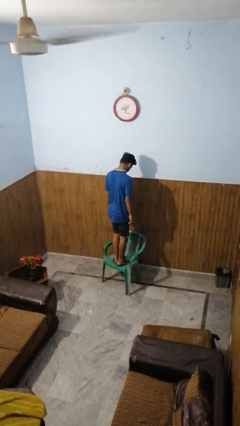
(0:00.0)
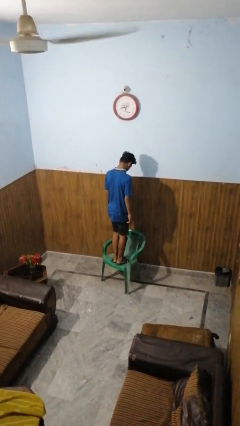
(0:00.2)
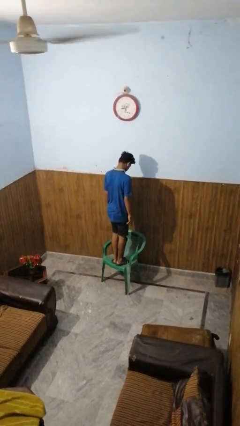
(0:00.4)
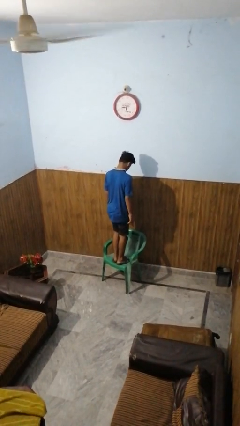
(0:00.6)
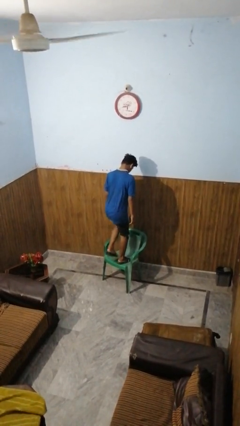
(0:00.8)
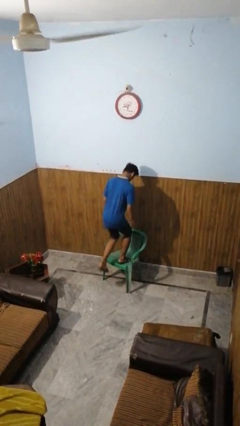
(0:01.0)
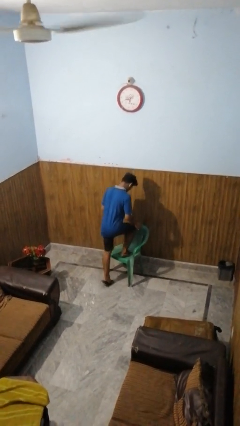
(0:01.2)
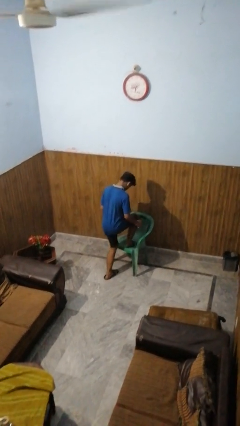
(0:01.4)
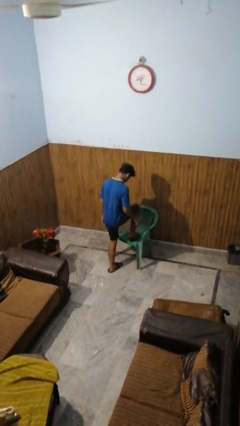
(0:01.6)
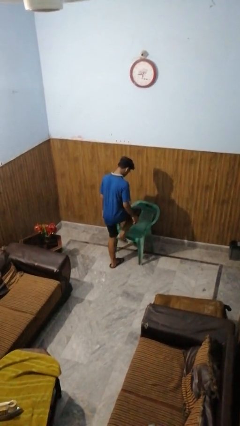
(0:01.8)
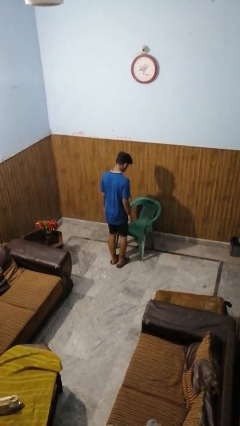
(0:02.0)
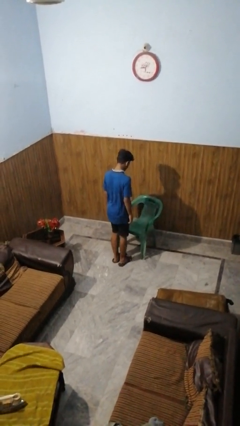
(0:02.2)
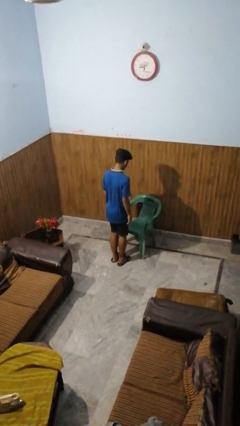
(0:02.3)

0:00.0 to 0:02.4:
person climbs off chair

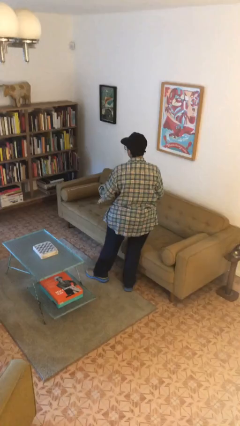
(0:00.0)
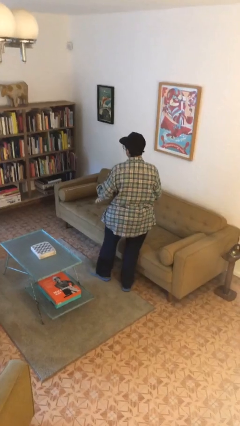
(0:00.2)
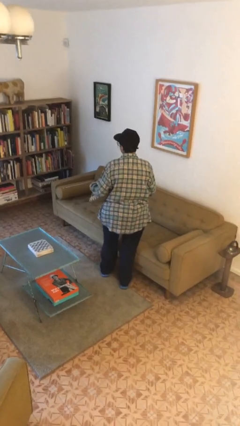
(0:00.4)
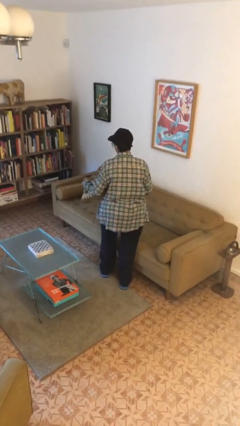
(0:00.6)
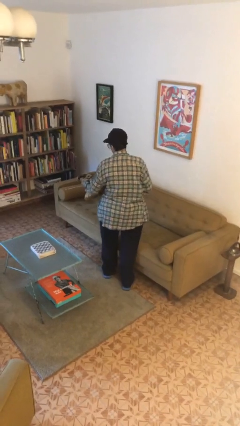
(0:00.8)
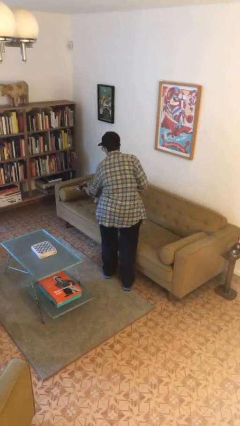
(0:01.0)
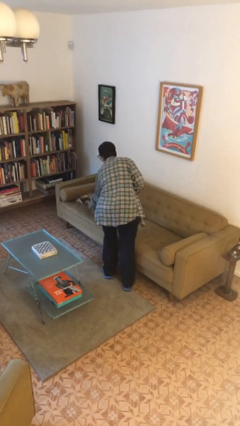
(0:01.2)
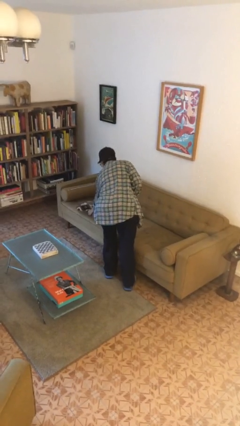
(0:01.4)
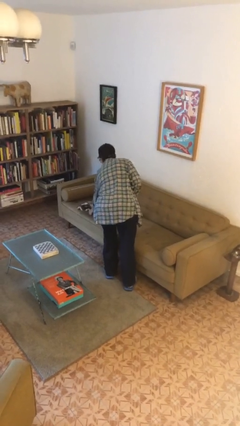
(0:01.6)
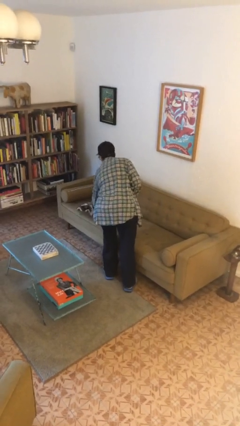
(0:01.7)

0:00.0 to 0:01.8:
person puts down object on couch

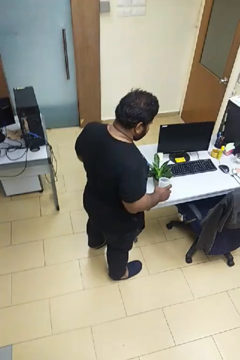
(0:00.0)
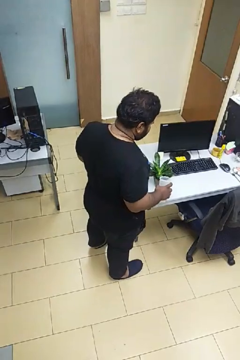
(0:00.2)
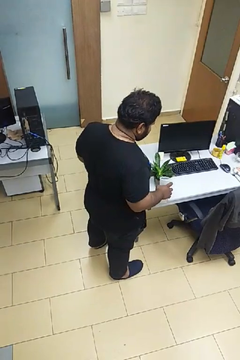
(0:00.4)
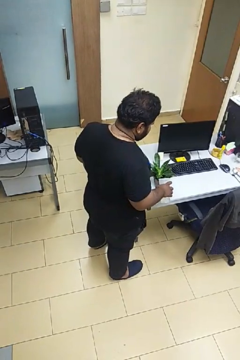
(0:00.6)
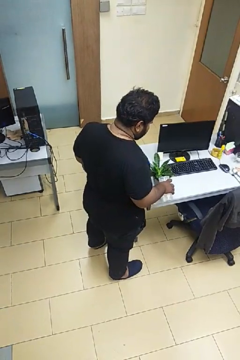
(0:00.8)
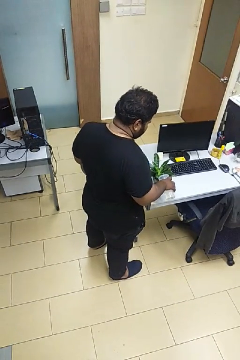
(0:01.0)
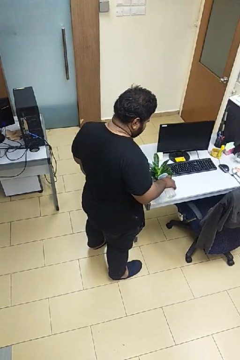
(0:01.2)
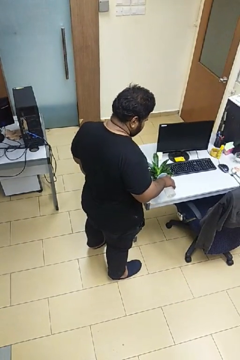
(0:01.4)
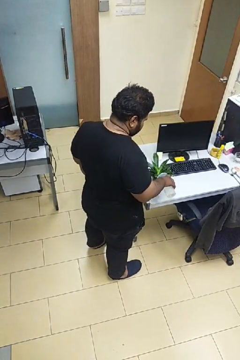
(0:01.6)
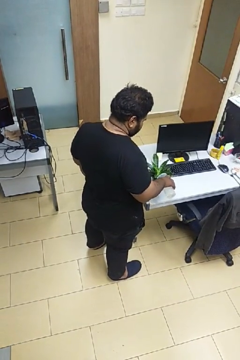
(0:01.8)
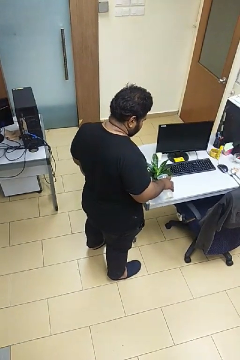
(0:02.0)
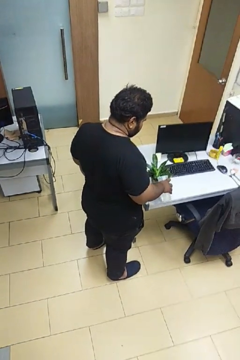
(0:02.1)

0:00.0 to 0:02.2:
person waters houseplant

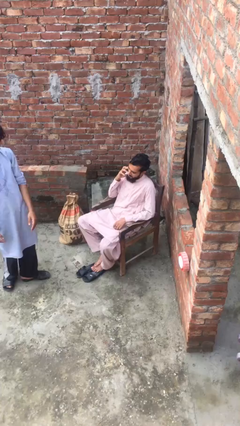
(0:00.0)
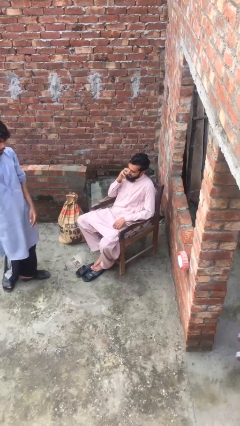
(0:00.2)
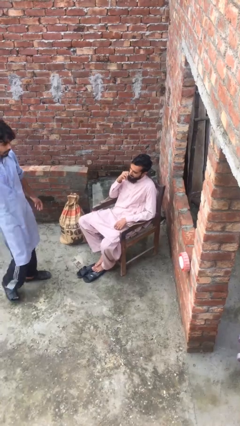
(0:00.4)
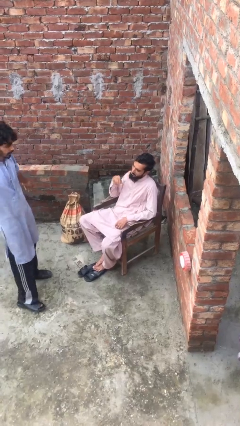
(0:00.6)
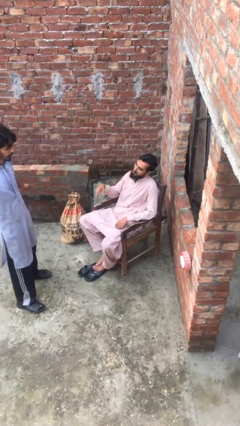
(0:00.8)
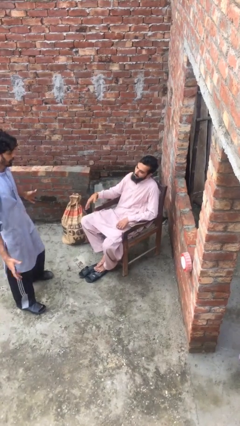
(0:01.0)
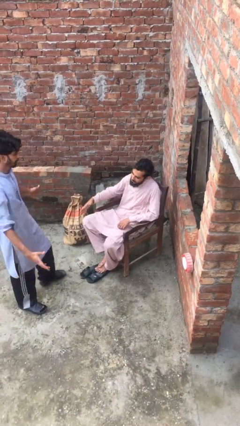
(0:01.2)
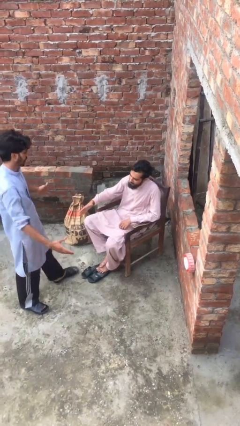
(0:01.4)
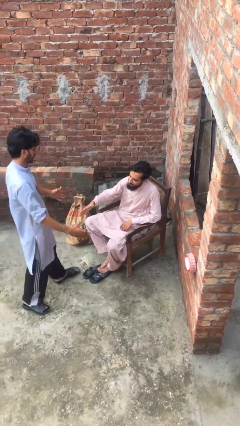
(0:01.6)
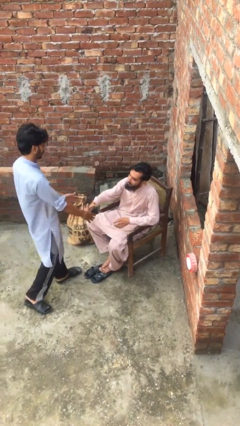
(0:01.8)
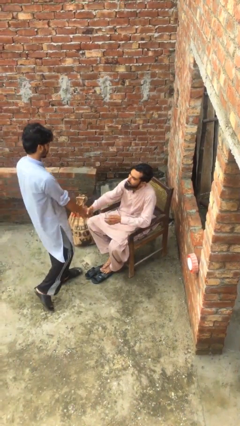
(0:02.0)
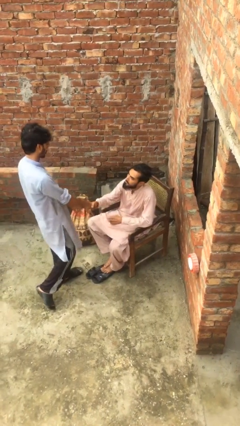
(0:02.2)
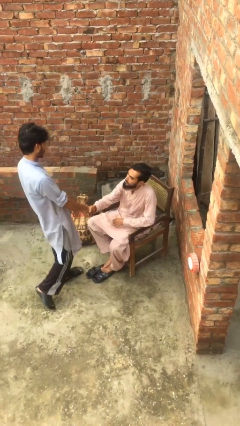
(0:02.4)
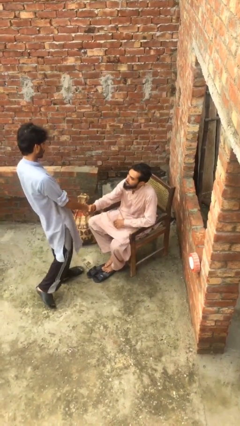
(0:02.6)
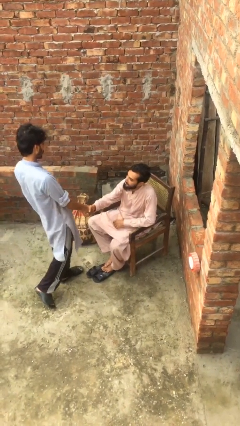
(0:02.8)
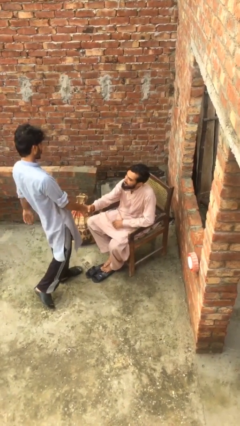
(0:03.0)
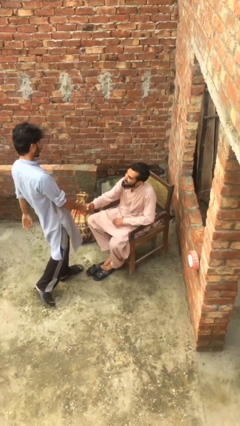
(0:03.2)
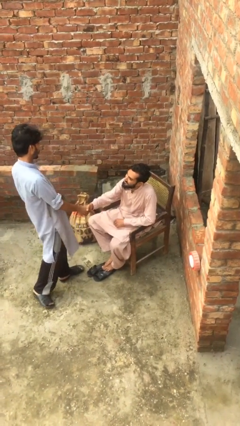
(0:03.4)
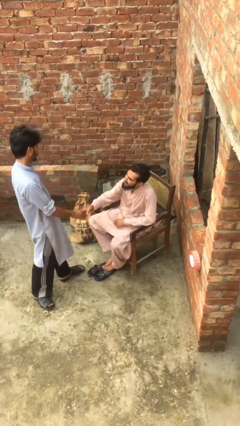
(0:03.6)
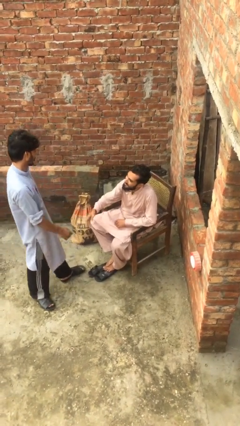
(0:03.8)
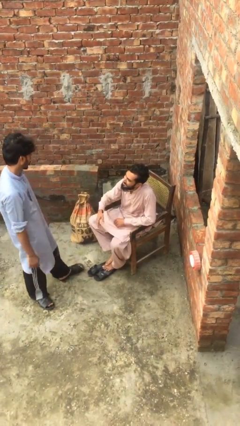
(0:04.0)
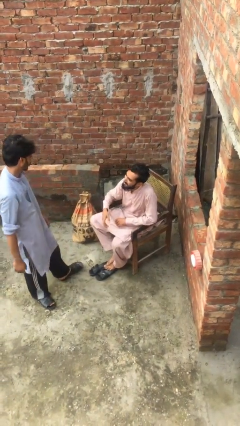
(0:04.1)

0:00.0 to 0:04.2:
person shakes hand

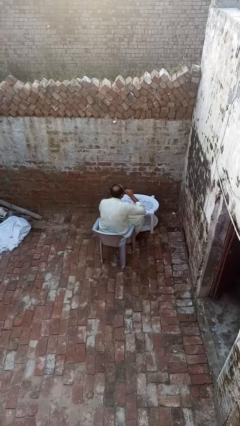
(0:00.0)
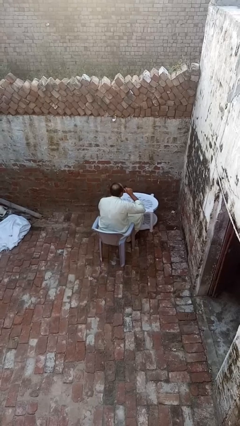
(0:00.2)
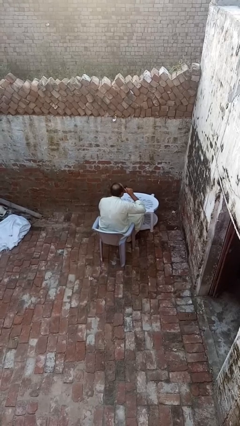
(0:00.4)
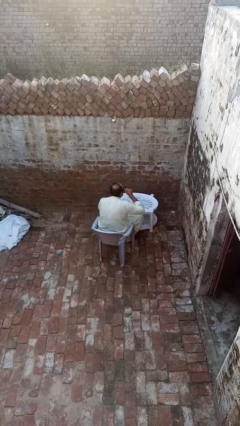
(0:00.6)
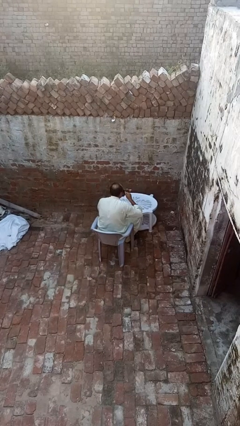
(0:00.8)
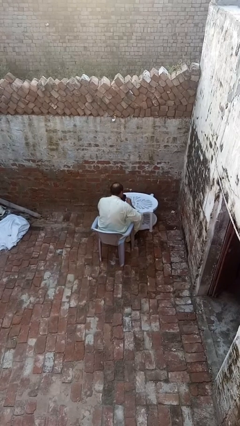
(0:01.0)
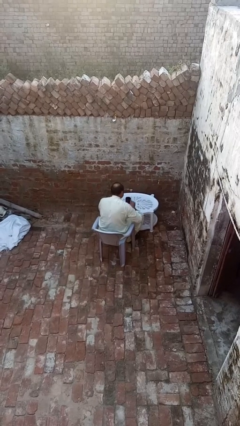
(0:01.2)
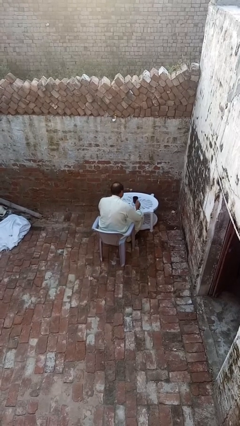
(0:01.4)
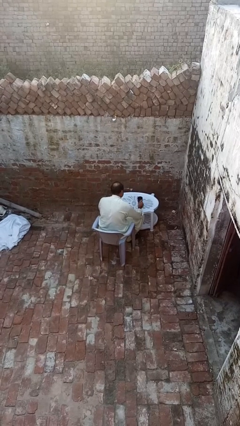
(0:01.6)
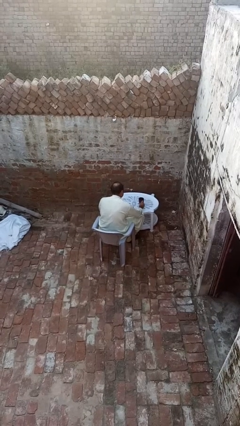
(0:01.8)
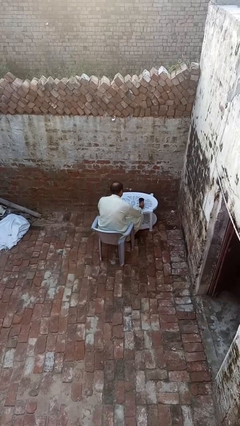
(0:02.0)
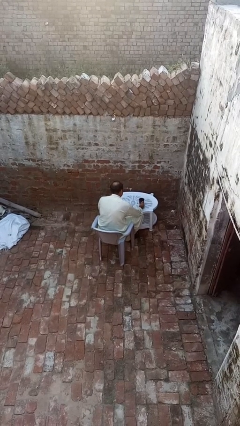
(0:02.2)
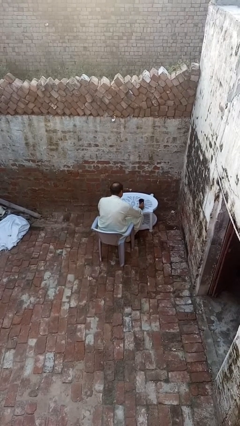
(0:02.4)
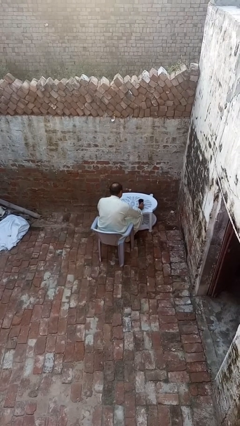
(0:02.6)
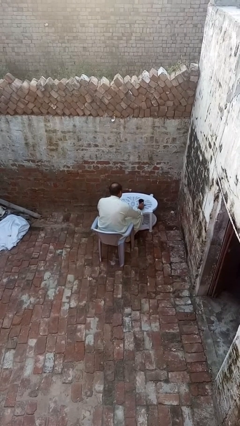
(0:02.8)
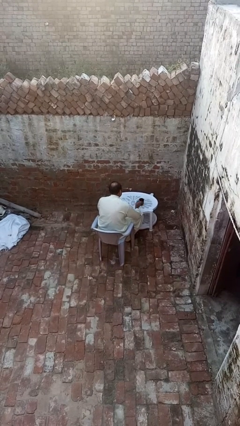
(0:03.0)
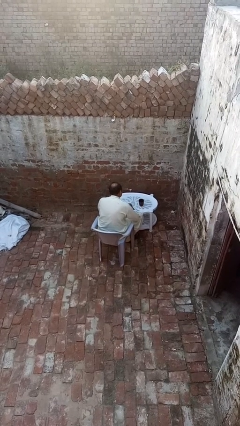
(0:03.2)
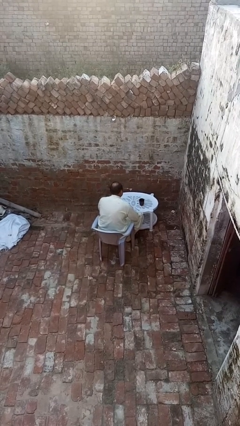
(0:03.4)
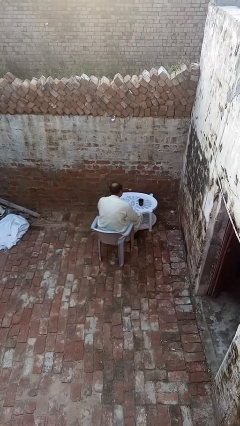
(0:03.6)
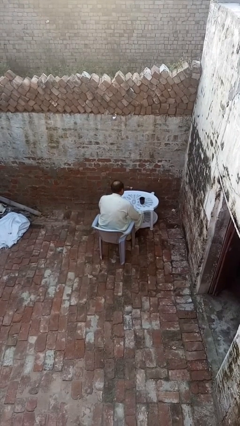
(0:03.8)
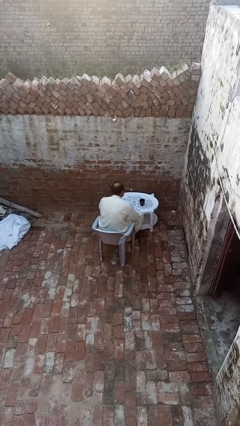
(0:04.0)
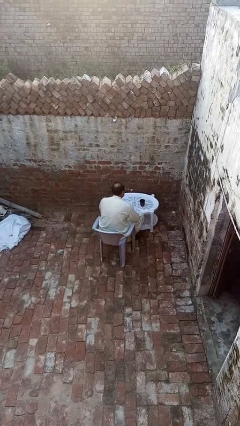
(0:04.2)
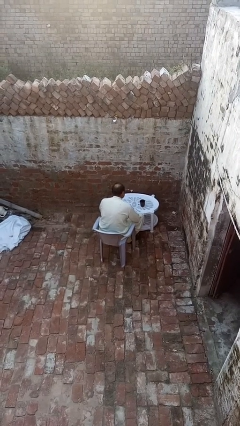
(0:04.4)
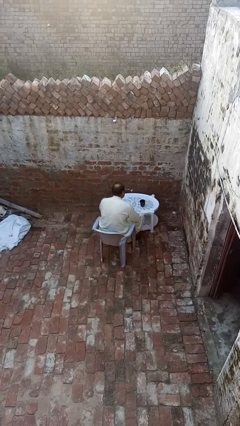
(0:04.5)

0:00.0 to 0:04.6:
person puts down object on table

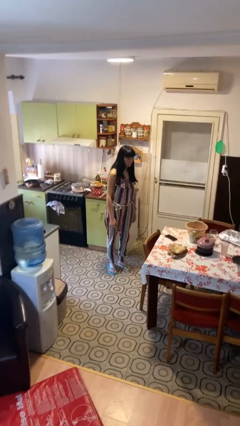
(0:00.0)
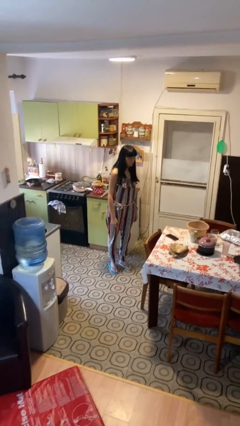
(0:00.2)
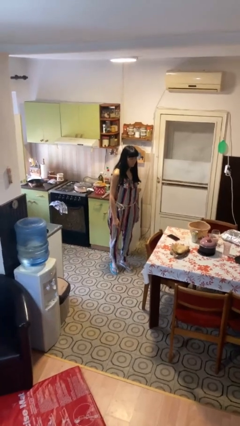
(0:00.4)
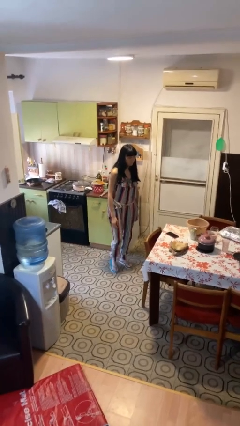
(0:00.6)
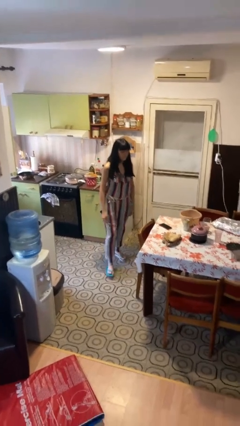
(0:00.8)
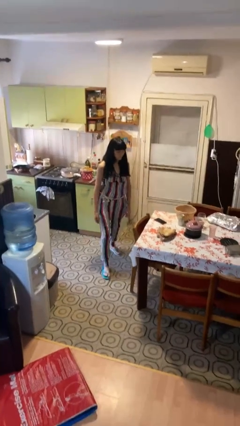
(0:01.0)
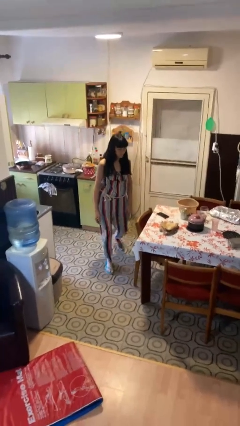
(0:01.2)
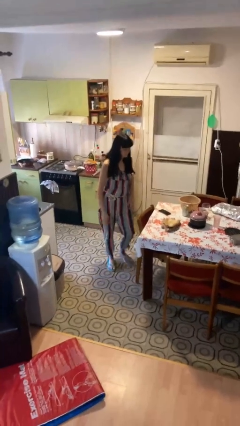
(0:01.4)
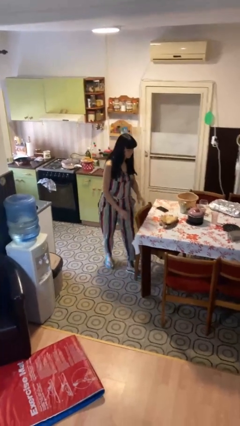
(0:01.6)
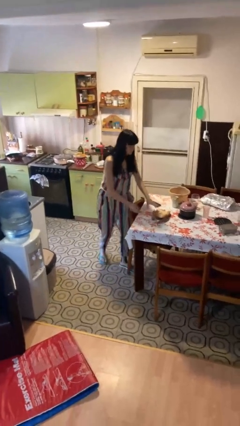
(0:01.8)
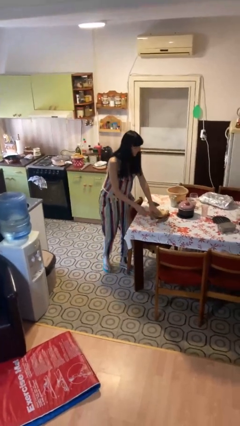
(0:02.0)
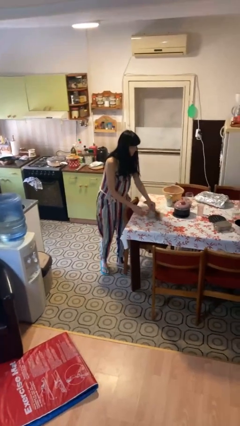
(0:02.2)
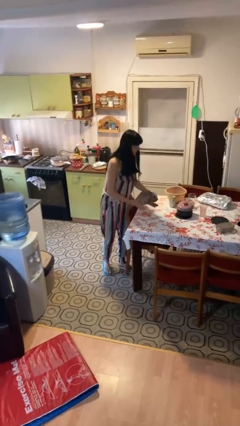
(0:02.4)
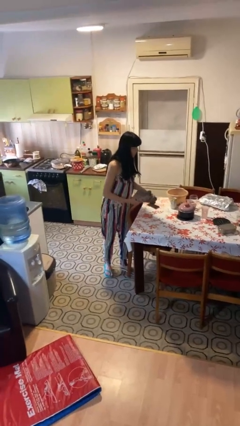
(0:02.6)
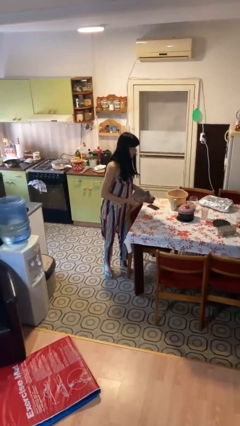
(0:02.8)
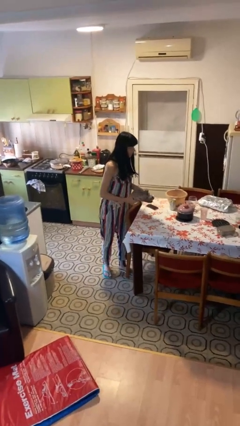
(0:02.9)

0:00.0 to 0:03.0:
person picks up object from table

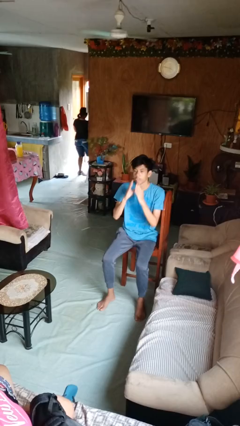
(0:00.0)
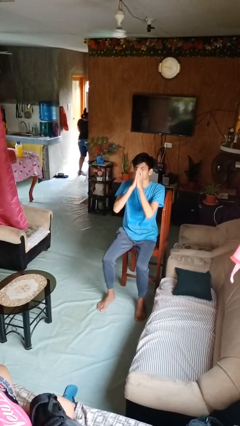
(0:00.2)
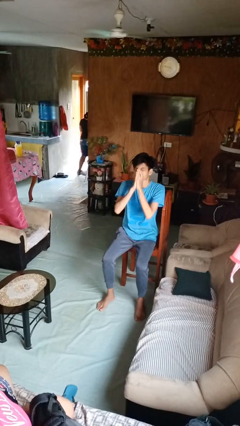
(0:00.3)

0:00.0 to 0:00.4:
person sneezes into hand
